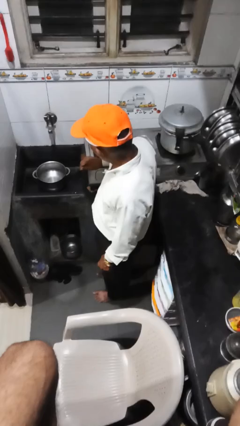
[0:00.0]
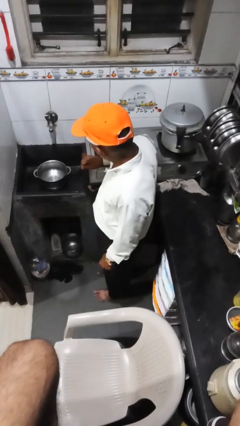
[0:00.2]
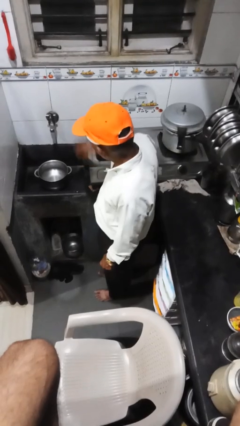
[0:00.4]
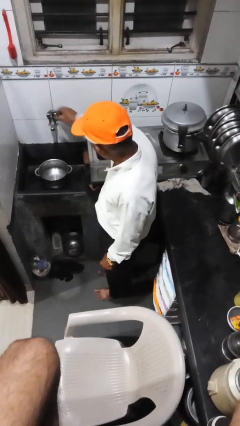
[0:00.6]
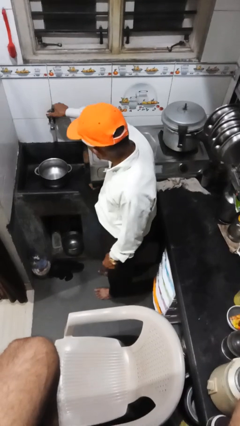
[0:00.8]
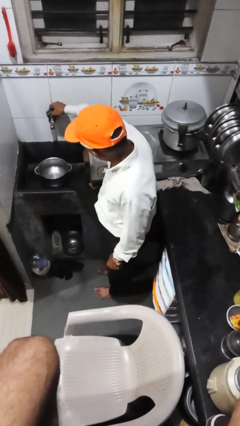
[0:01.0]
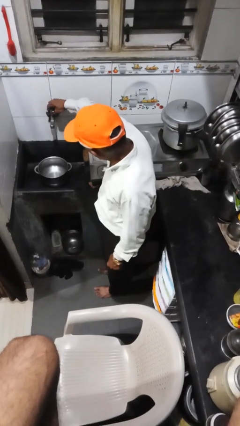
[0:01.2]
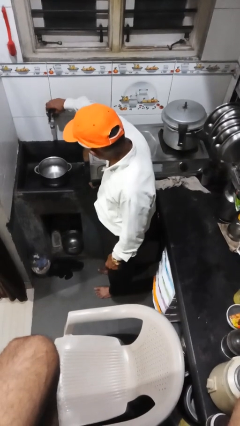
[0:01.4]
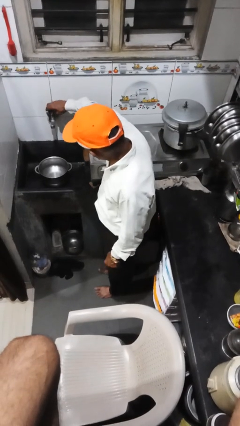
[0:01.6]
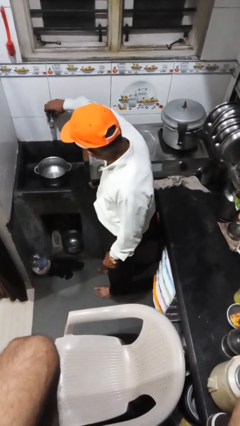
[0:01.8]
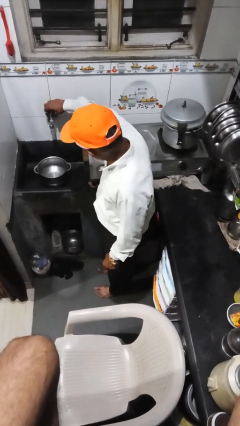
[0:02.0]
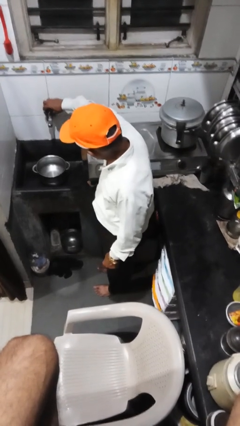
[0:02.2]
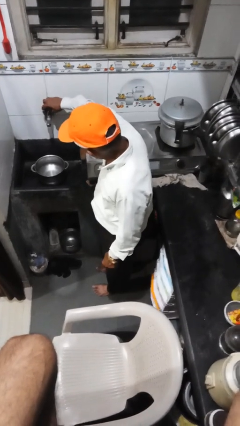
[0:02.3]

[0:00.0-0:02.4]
person turns on faucet

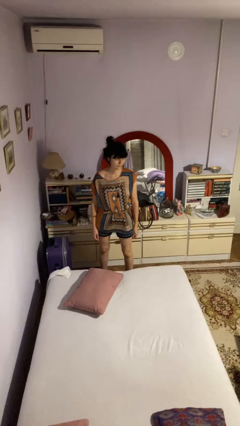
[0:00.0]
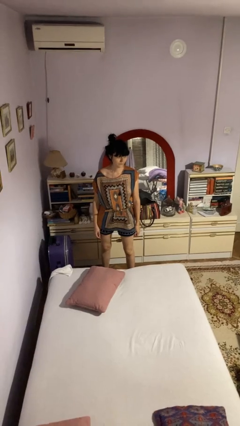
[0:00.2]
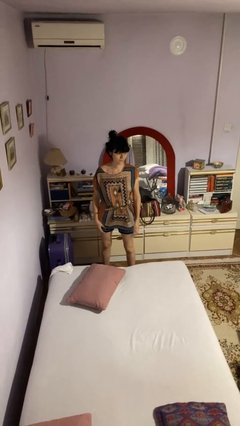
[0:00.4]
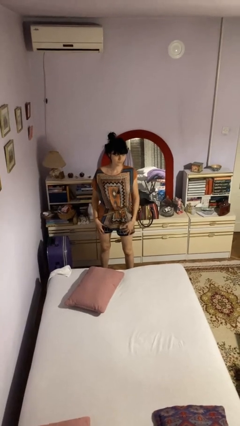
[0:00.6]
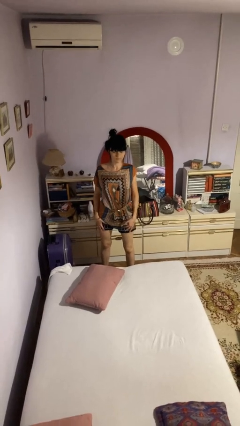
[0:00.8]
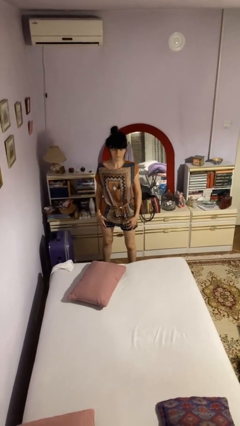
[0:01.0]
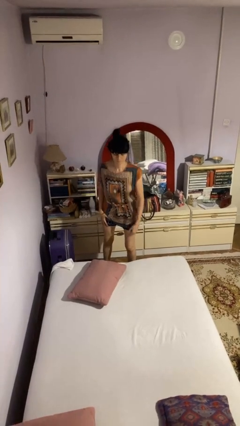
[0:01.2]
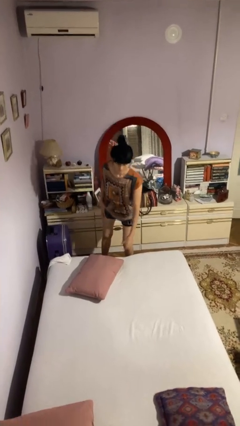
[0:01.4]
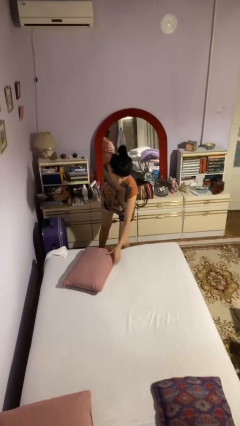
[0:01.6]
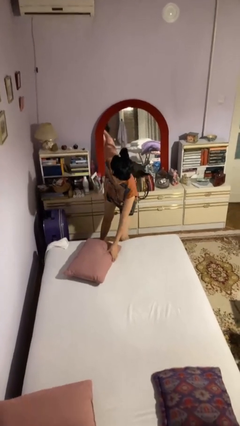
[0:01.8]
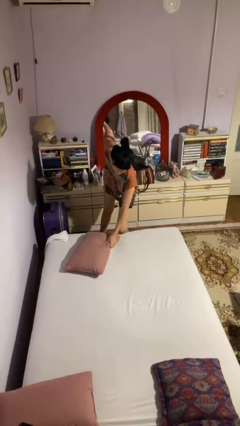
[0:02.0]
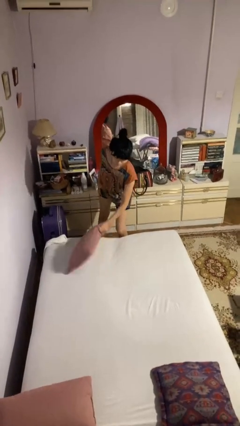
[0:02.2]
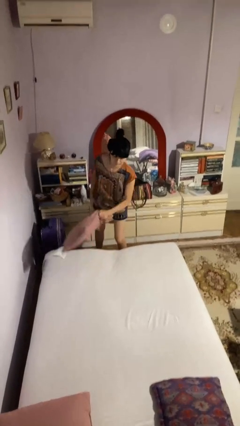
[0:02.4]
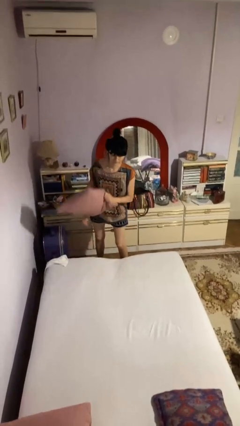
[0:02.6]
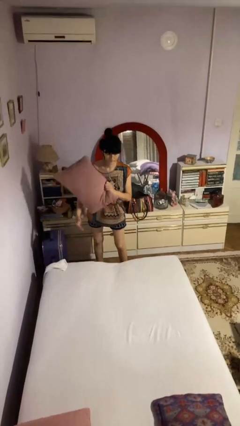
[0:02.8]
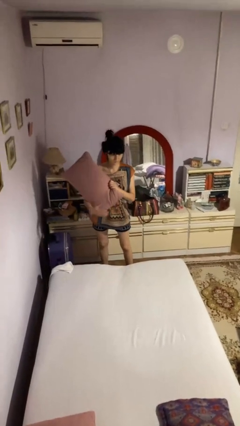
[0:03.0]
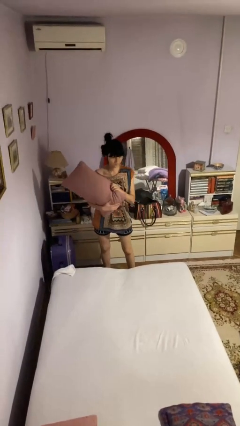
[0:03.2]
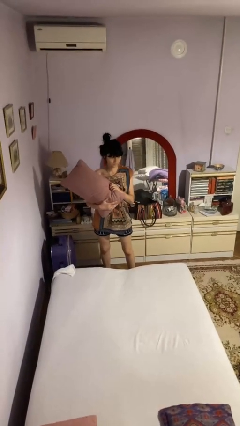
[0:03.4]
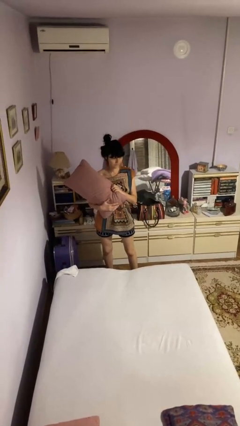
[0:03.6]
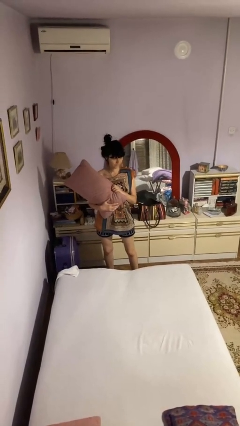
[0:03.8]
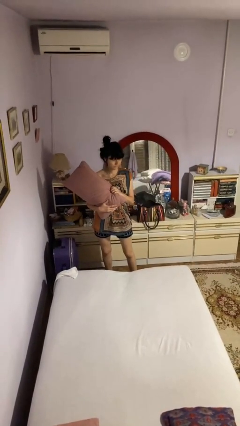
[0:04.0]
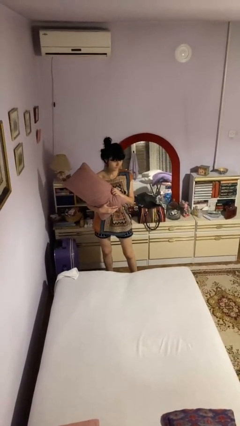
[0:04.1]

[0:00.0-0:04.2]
person picks up object from bed

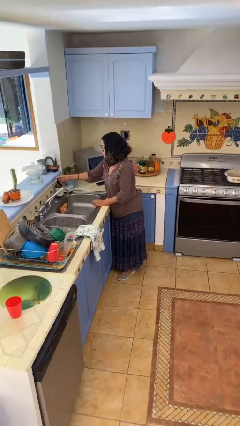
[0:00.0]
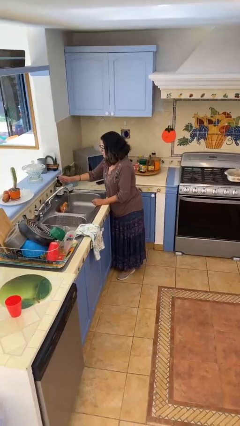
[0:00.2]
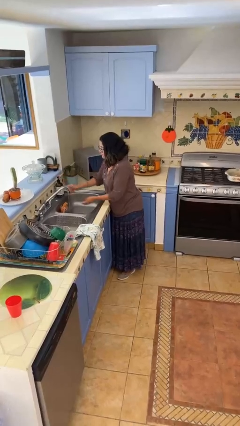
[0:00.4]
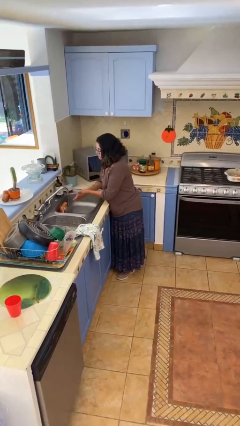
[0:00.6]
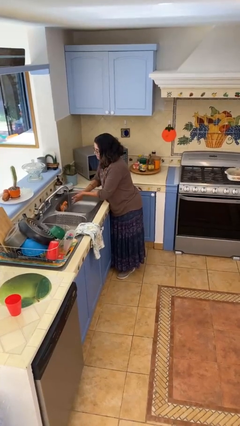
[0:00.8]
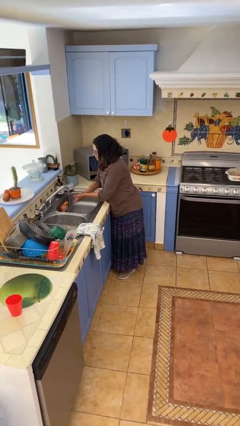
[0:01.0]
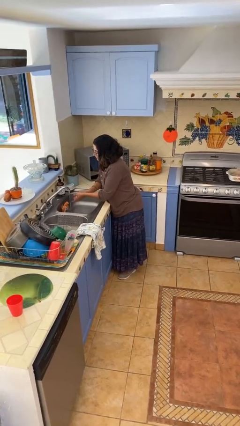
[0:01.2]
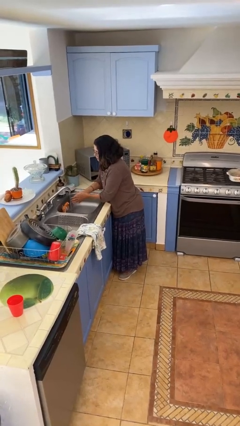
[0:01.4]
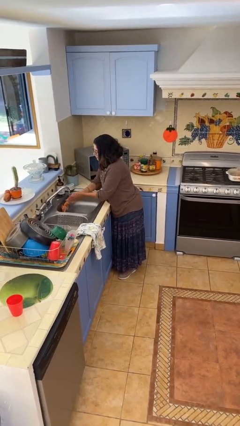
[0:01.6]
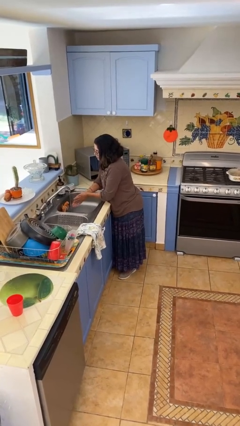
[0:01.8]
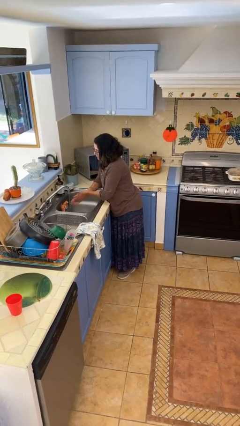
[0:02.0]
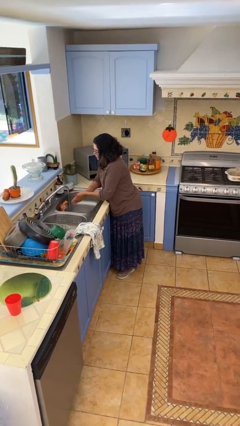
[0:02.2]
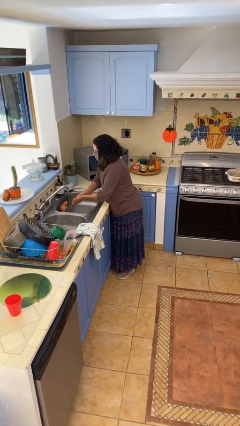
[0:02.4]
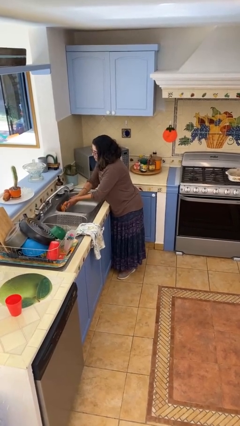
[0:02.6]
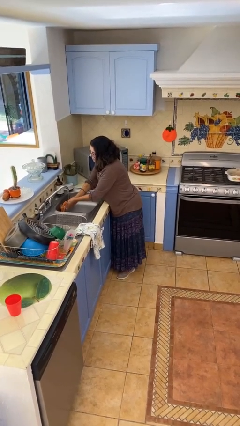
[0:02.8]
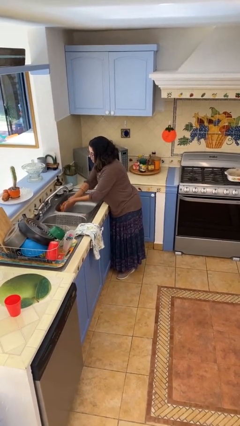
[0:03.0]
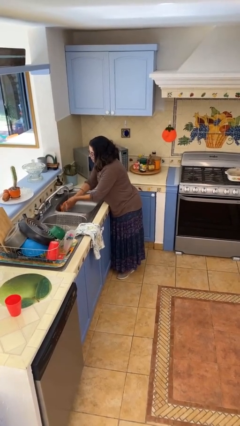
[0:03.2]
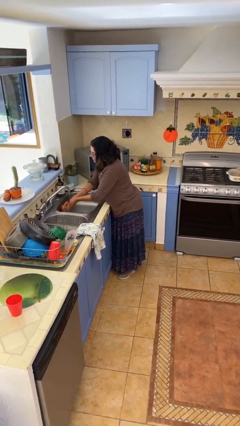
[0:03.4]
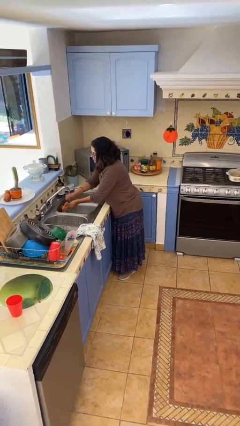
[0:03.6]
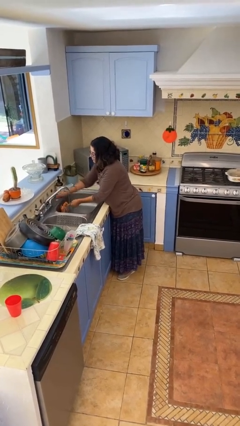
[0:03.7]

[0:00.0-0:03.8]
person washes hands

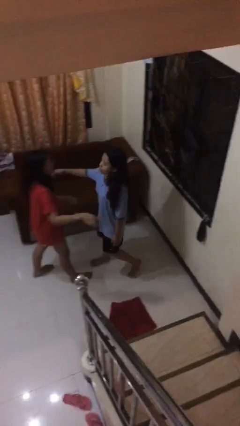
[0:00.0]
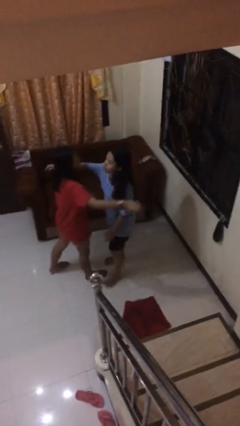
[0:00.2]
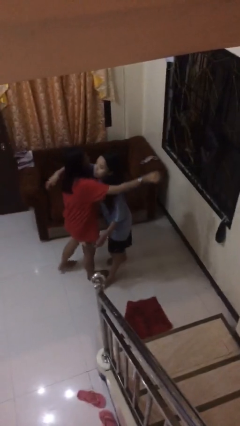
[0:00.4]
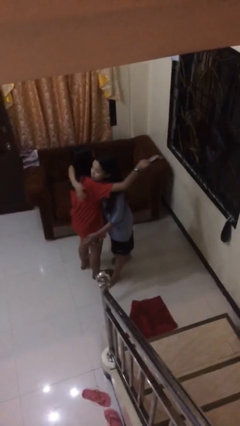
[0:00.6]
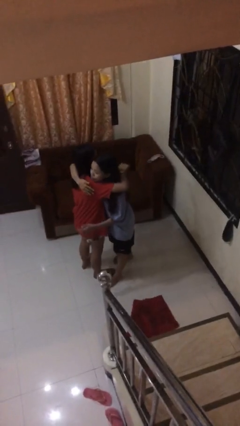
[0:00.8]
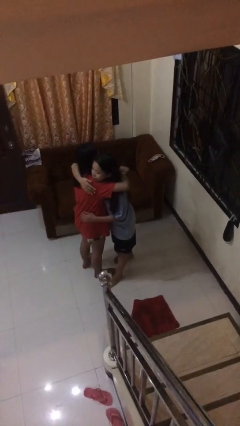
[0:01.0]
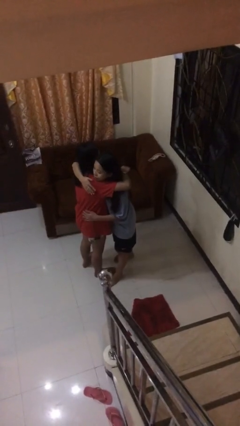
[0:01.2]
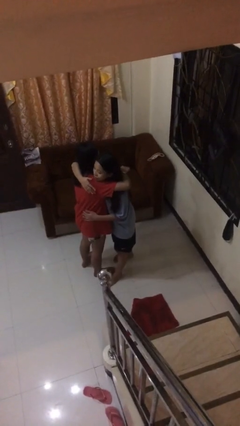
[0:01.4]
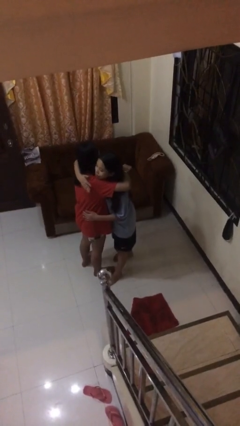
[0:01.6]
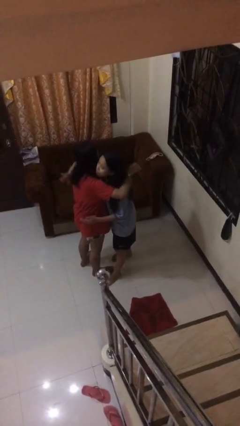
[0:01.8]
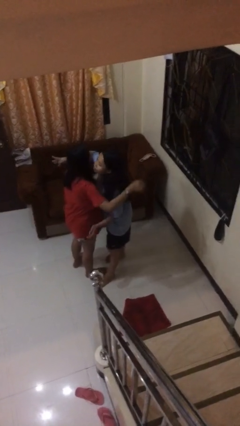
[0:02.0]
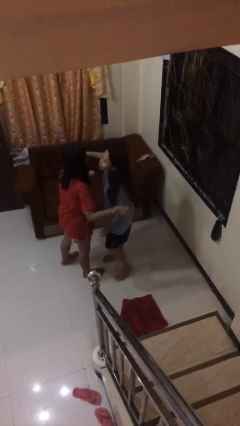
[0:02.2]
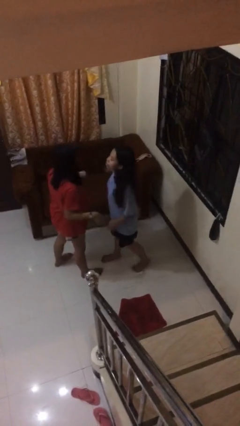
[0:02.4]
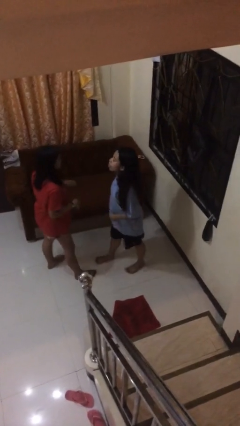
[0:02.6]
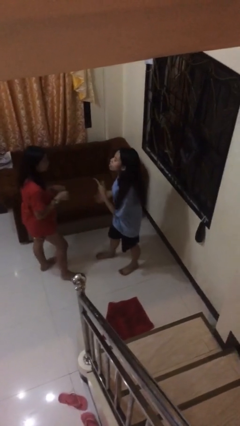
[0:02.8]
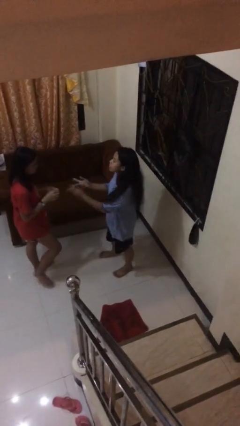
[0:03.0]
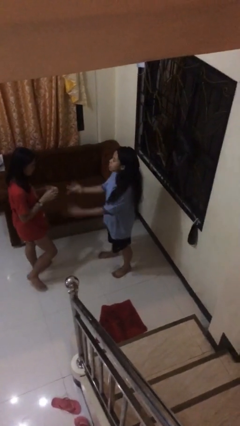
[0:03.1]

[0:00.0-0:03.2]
person embraces person

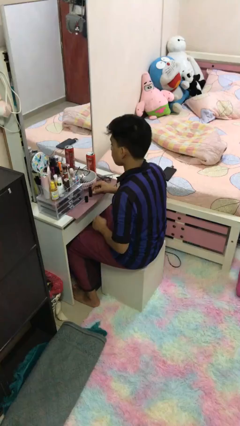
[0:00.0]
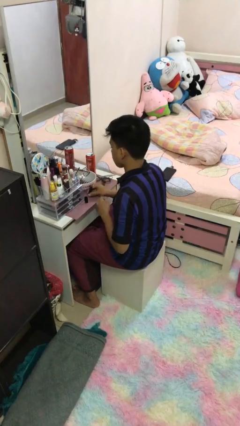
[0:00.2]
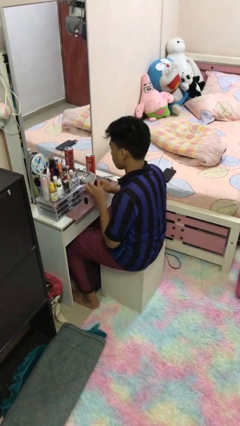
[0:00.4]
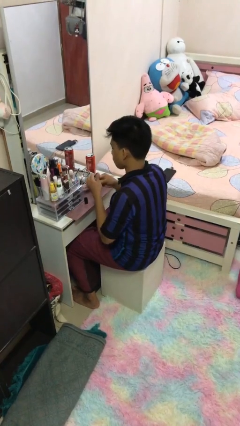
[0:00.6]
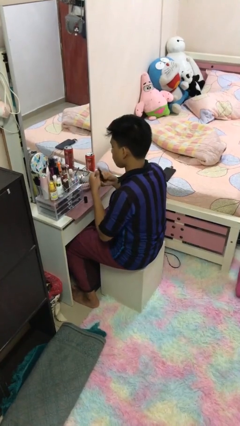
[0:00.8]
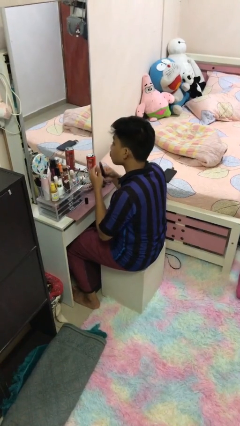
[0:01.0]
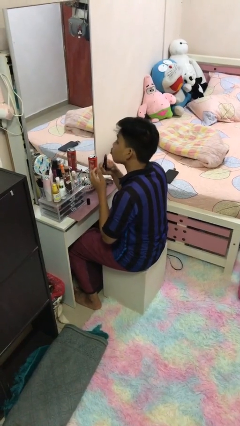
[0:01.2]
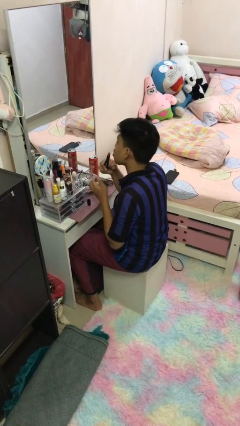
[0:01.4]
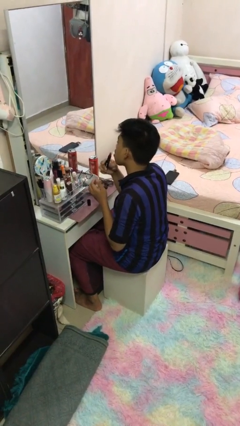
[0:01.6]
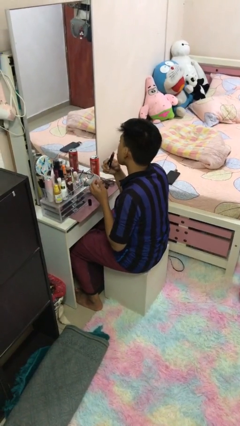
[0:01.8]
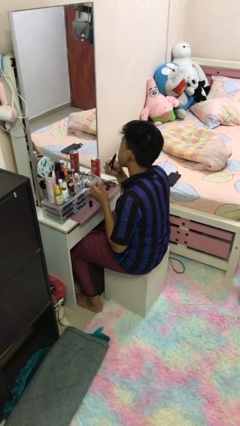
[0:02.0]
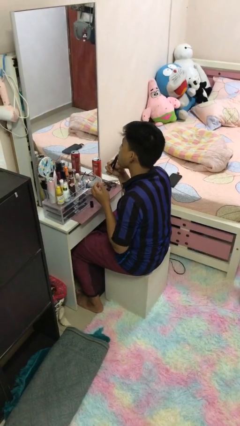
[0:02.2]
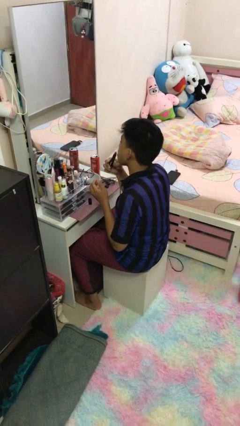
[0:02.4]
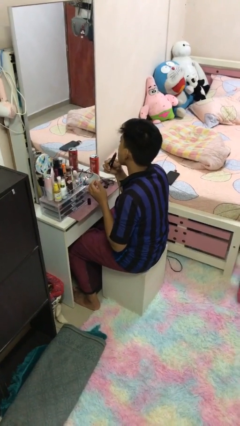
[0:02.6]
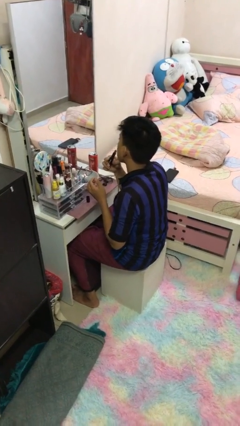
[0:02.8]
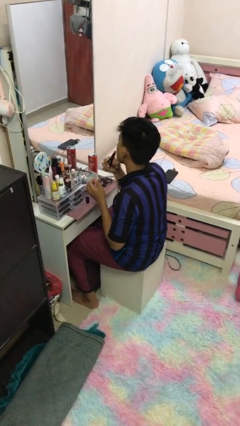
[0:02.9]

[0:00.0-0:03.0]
person applies lip makeup

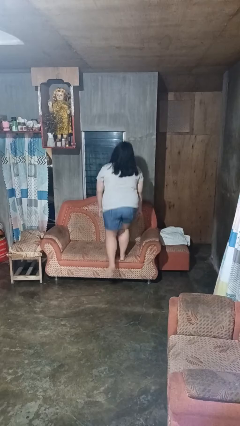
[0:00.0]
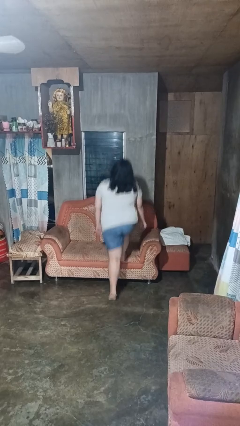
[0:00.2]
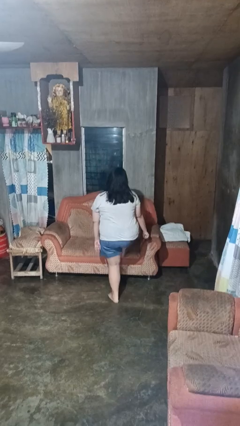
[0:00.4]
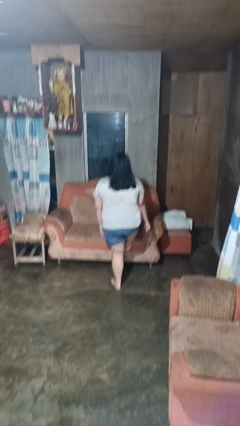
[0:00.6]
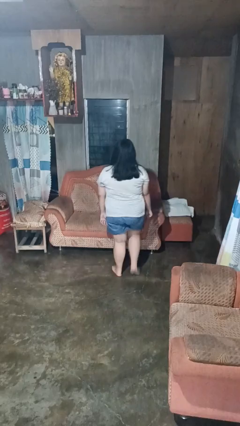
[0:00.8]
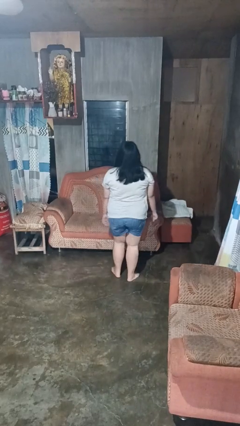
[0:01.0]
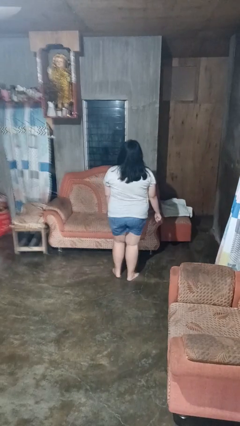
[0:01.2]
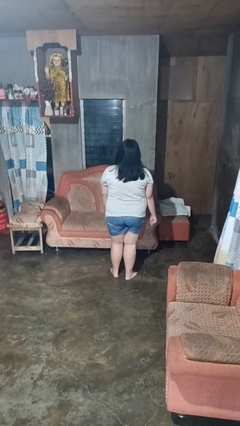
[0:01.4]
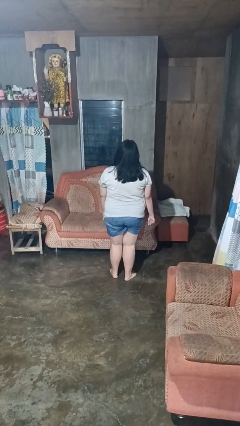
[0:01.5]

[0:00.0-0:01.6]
person climbs off couch
